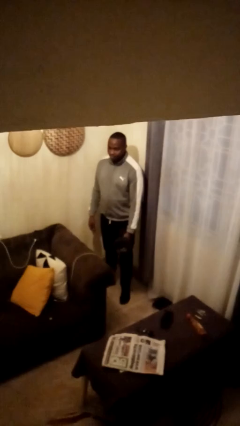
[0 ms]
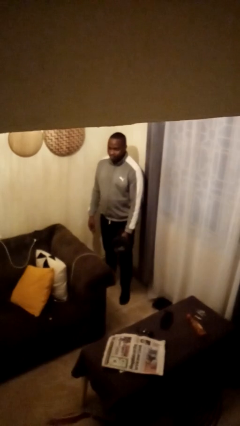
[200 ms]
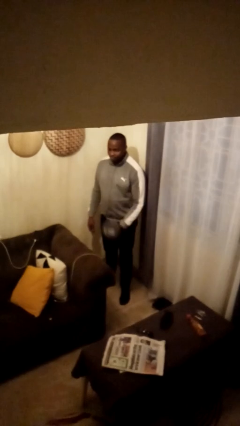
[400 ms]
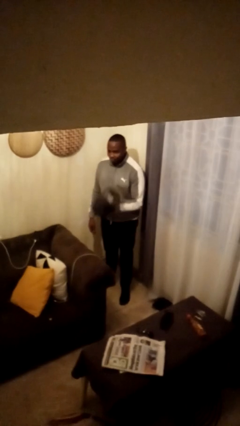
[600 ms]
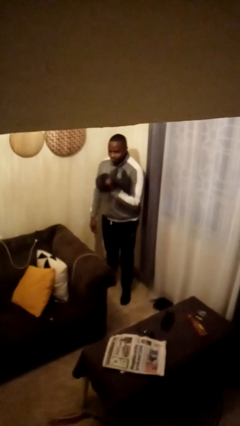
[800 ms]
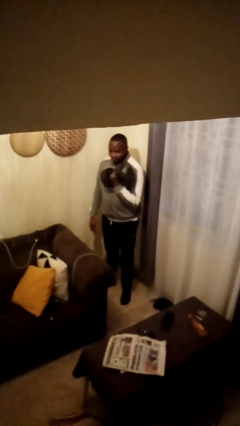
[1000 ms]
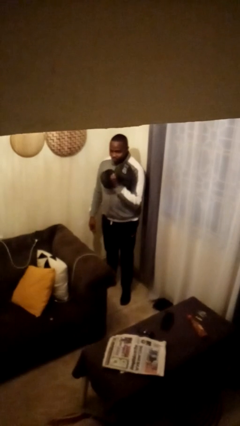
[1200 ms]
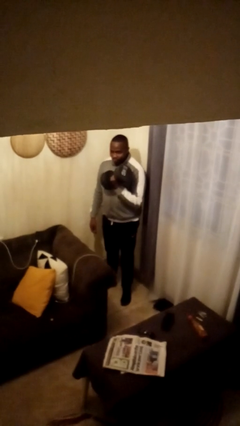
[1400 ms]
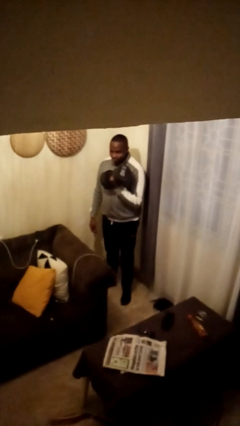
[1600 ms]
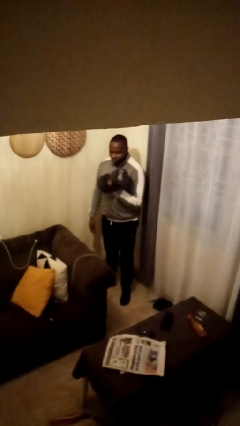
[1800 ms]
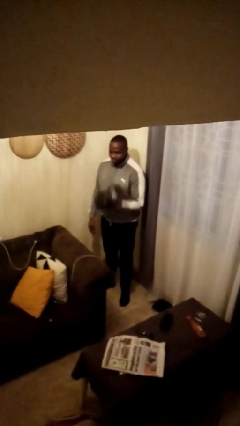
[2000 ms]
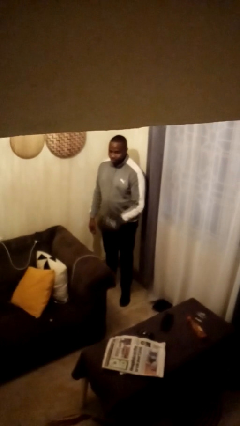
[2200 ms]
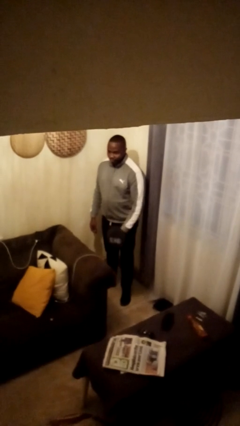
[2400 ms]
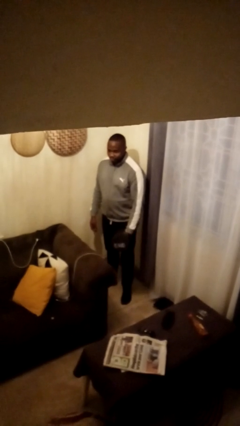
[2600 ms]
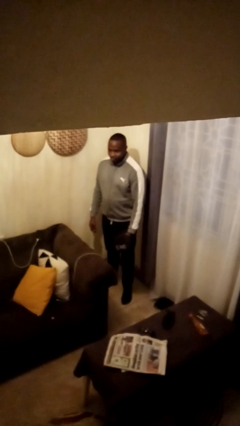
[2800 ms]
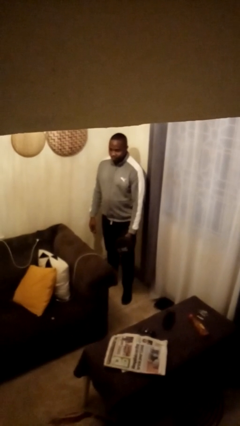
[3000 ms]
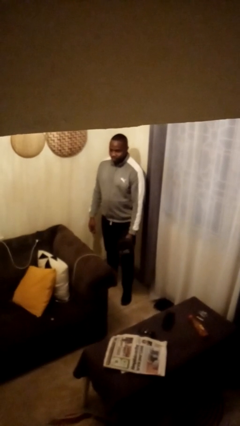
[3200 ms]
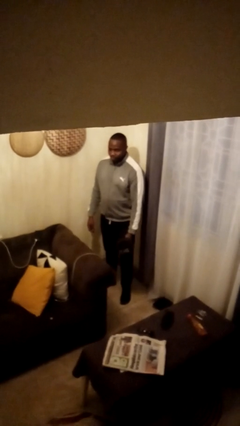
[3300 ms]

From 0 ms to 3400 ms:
person lifts dumbbells

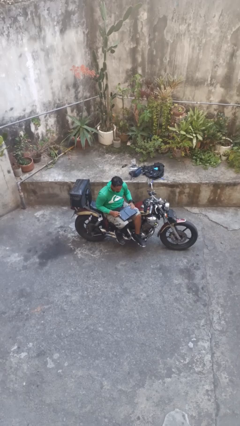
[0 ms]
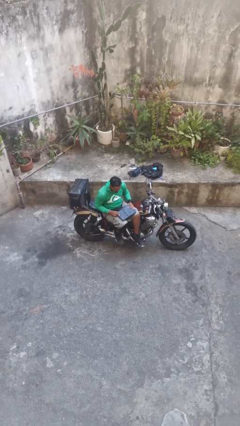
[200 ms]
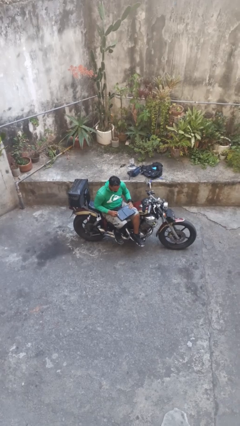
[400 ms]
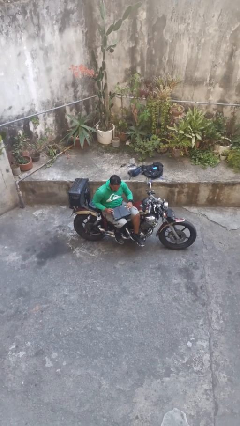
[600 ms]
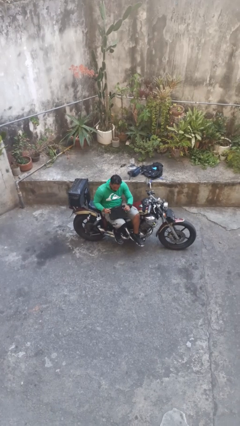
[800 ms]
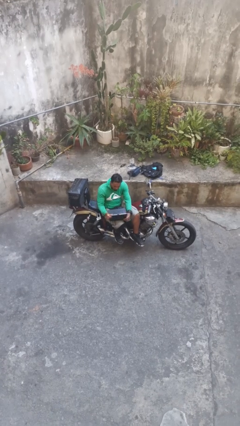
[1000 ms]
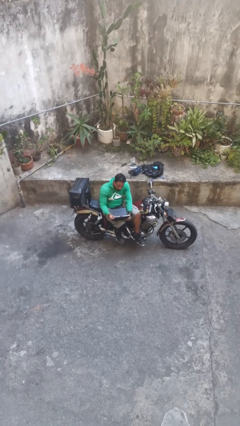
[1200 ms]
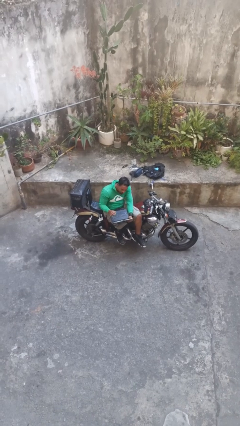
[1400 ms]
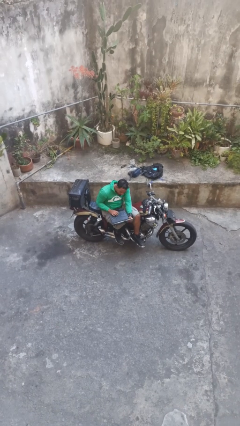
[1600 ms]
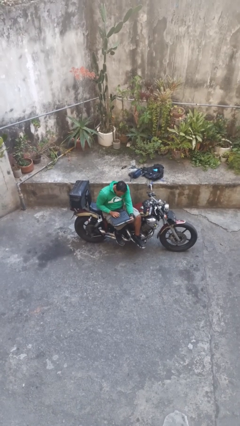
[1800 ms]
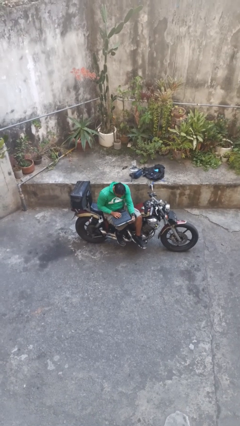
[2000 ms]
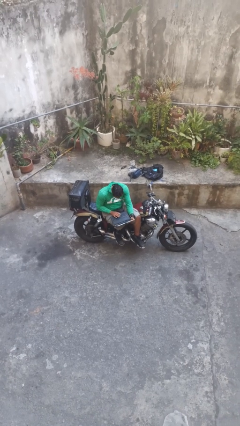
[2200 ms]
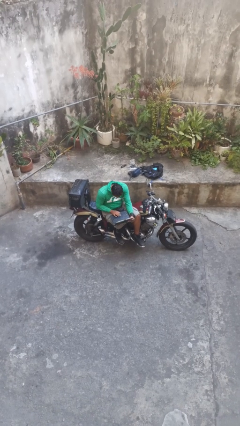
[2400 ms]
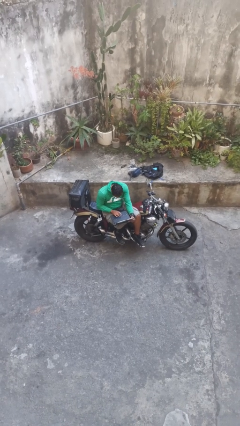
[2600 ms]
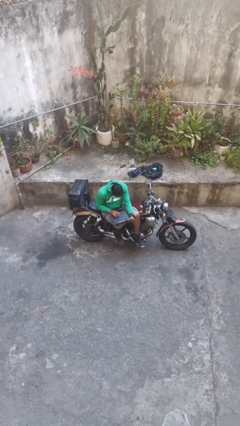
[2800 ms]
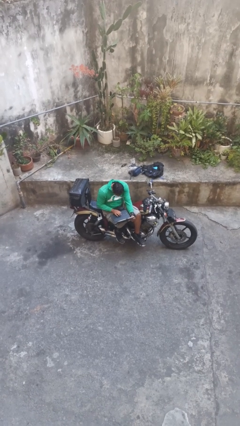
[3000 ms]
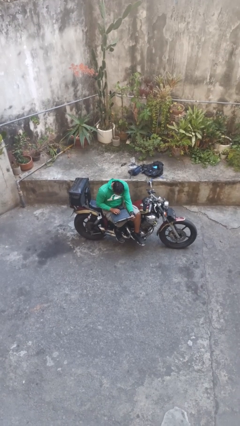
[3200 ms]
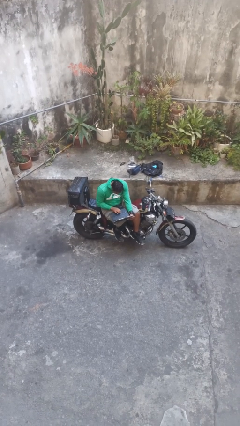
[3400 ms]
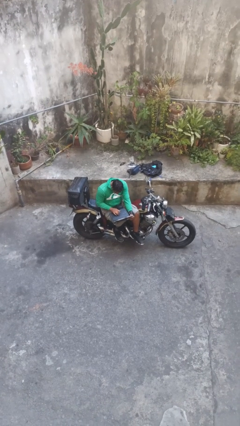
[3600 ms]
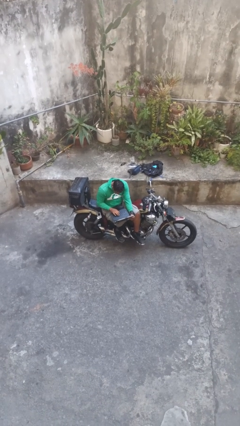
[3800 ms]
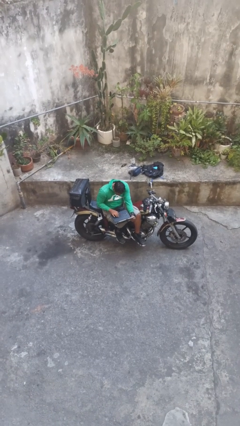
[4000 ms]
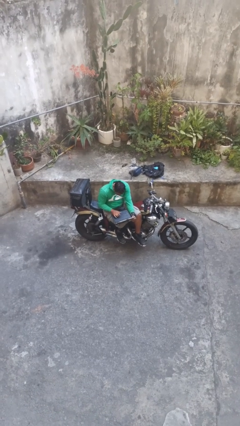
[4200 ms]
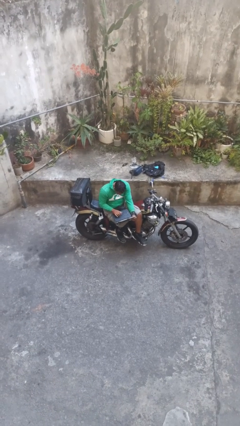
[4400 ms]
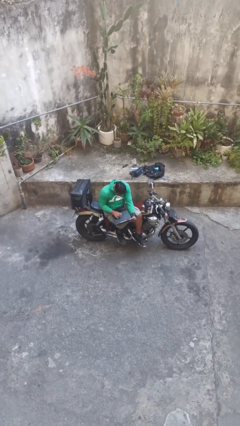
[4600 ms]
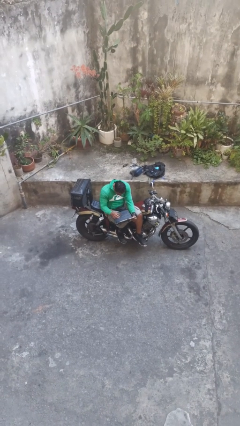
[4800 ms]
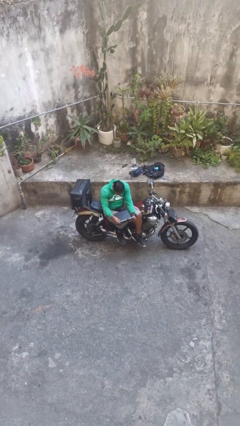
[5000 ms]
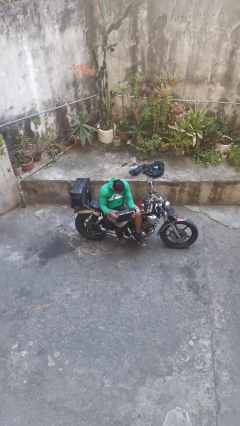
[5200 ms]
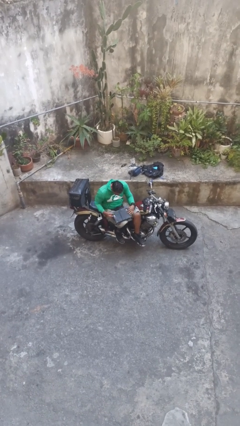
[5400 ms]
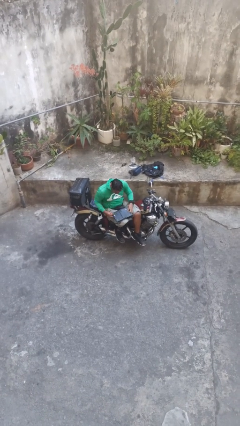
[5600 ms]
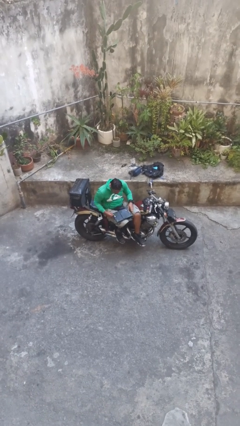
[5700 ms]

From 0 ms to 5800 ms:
person interacts with laptop

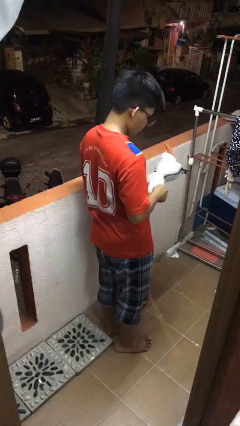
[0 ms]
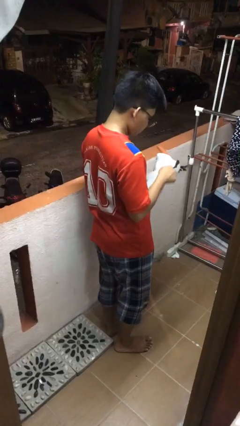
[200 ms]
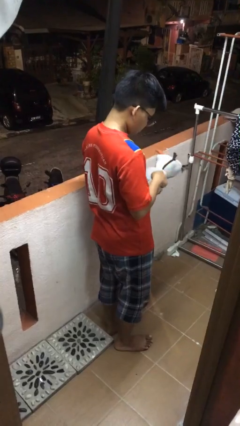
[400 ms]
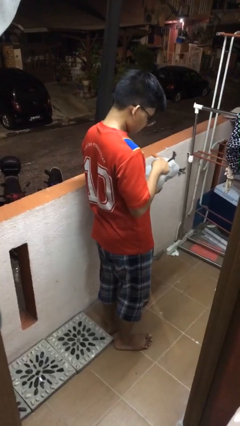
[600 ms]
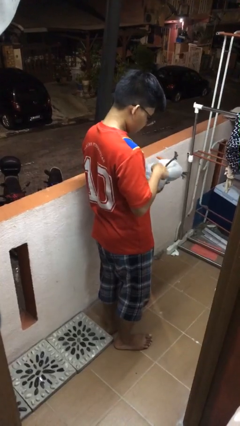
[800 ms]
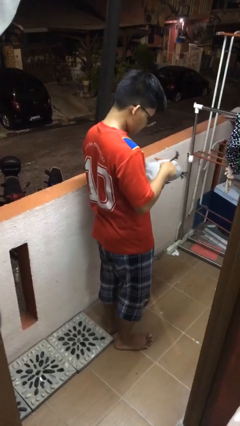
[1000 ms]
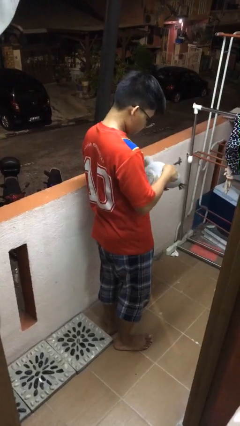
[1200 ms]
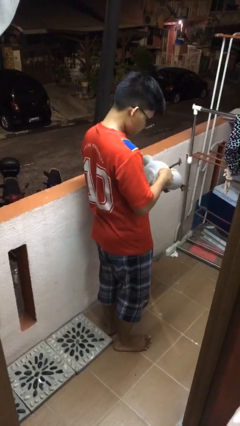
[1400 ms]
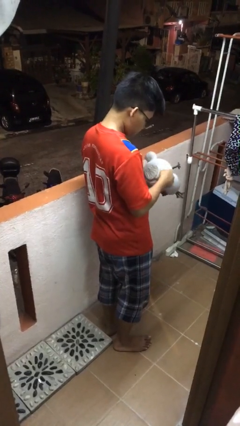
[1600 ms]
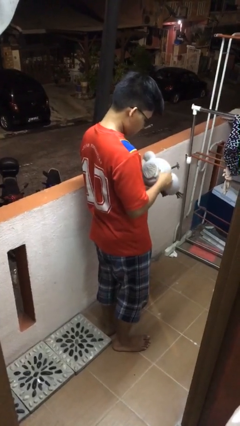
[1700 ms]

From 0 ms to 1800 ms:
person taps object with finger

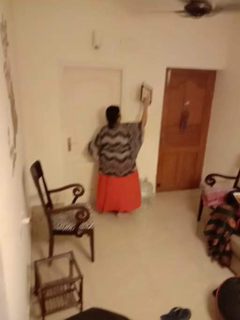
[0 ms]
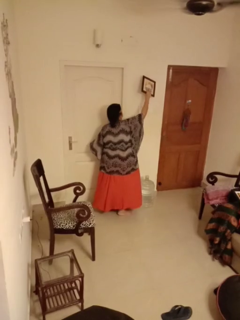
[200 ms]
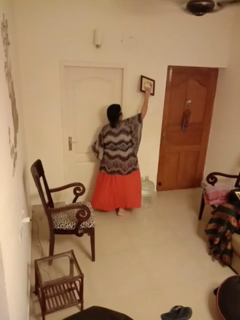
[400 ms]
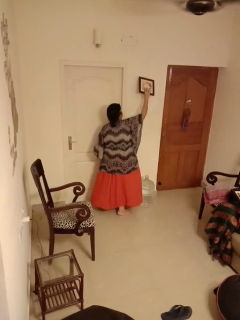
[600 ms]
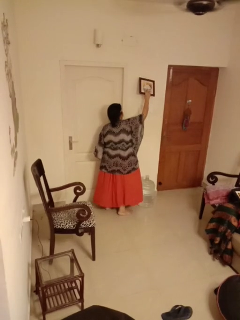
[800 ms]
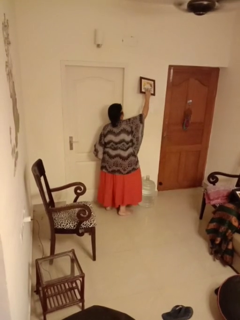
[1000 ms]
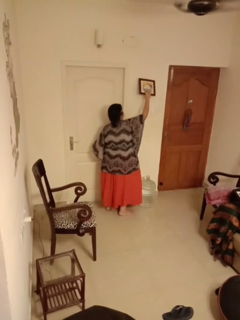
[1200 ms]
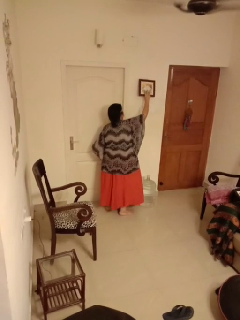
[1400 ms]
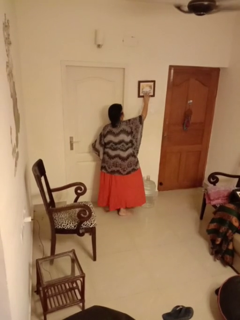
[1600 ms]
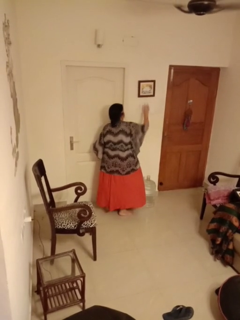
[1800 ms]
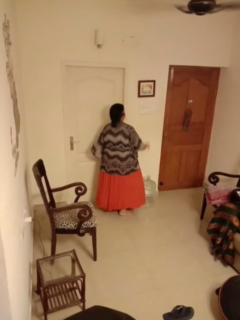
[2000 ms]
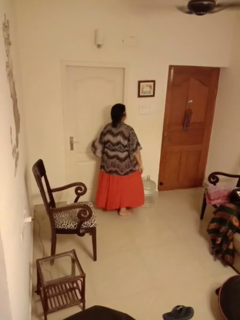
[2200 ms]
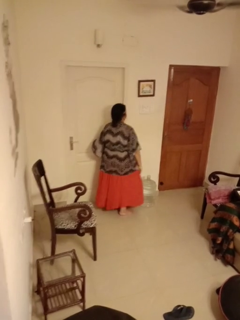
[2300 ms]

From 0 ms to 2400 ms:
person puts up picture frame

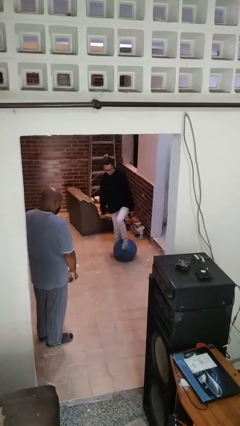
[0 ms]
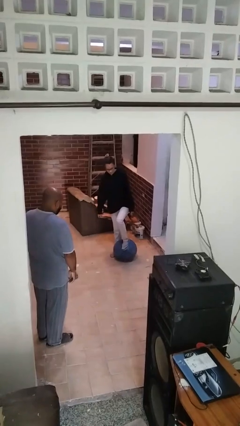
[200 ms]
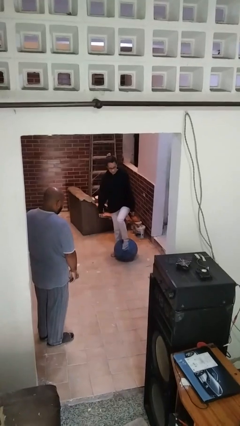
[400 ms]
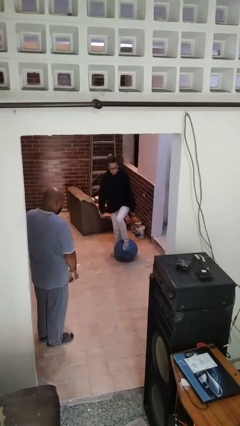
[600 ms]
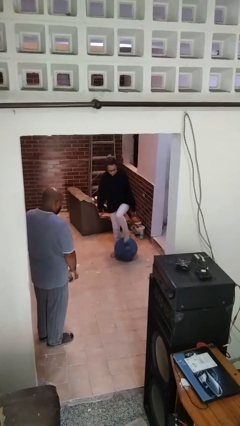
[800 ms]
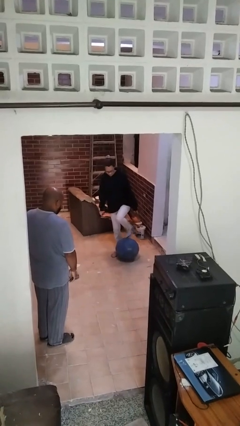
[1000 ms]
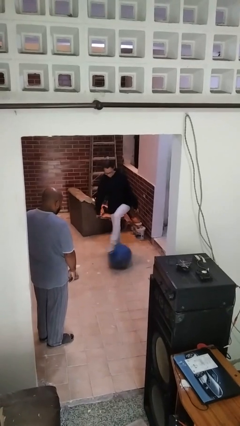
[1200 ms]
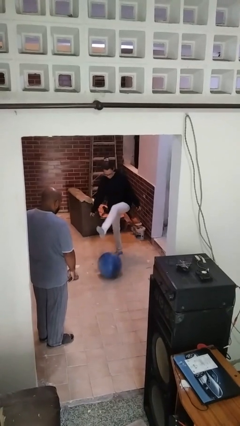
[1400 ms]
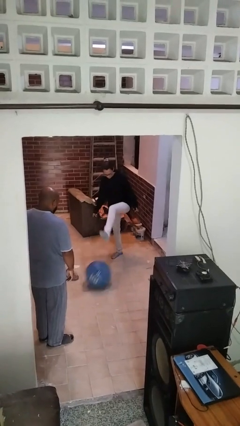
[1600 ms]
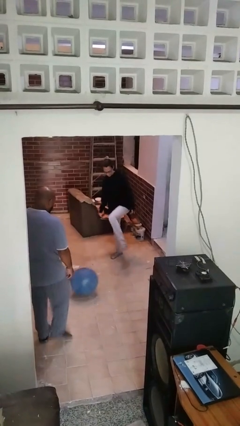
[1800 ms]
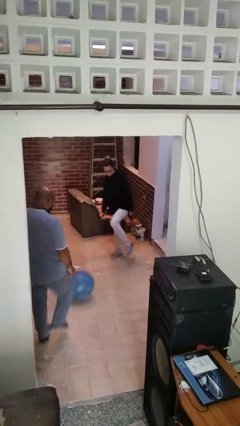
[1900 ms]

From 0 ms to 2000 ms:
person kicks object to person

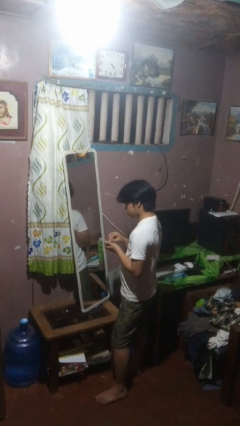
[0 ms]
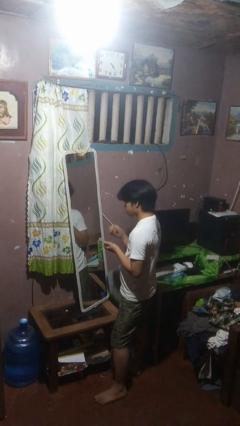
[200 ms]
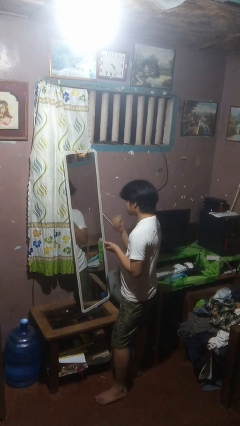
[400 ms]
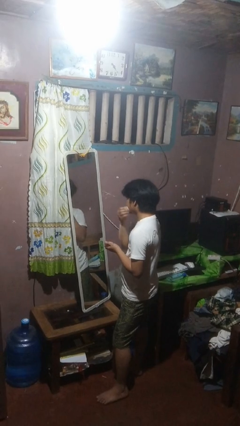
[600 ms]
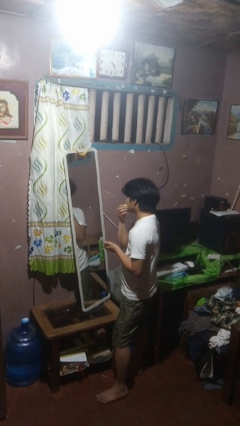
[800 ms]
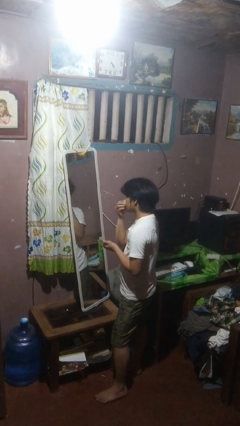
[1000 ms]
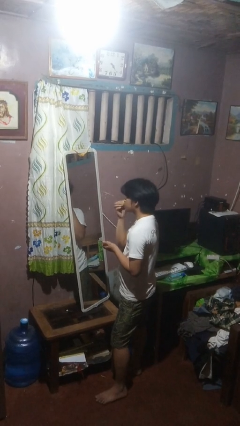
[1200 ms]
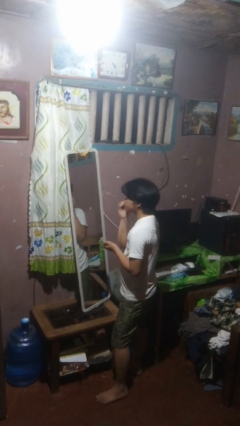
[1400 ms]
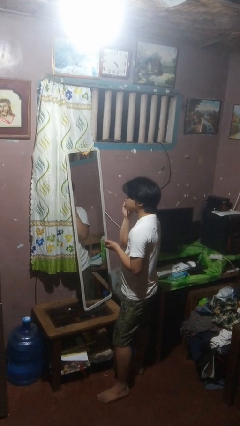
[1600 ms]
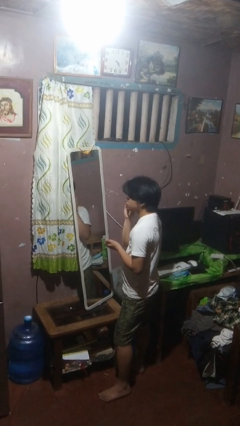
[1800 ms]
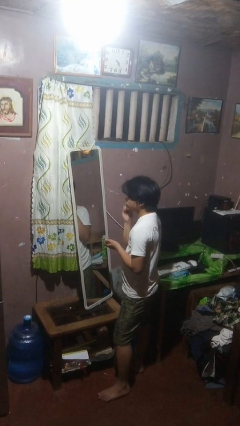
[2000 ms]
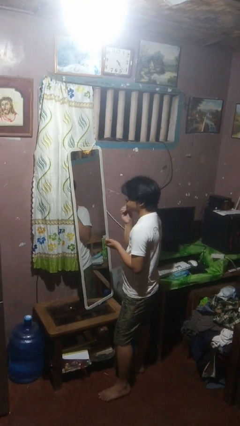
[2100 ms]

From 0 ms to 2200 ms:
person applies foundation makeup

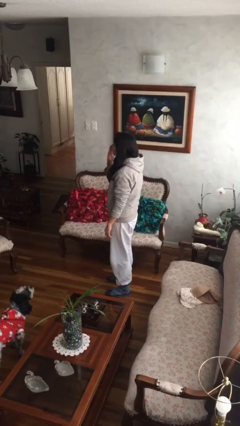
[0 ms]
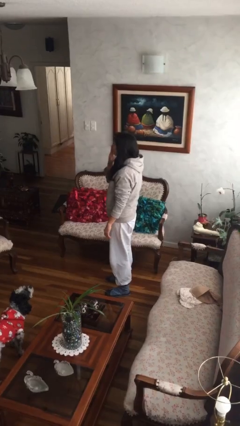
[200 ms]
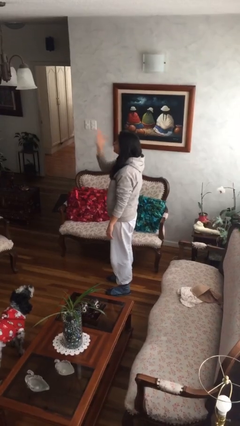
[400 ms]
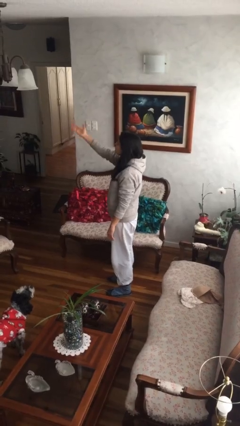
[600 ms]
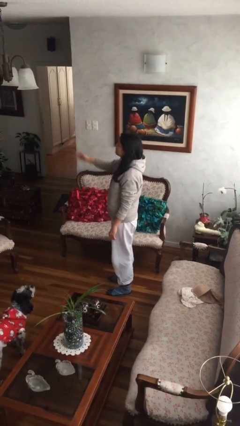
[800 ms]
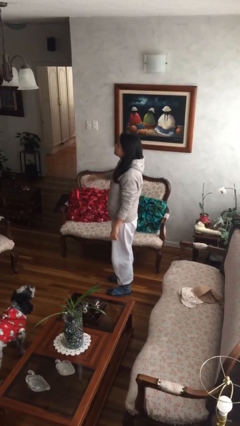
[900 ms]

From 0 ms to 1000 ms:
person gestures blow kiss
